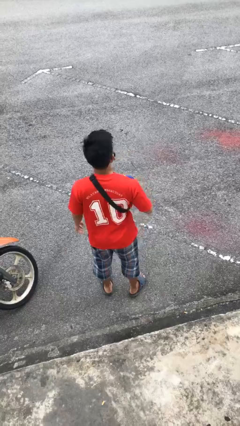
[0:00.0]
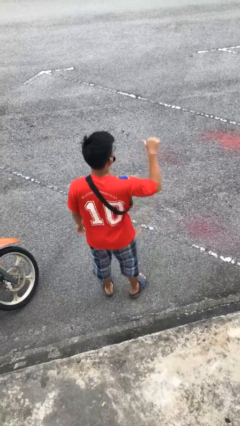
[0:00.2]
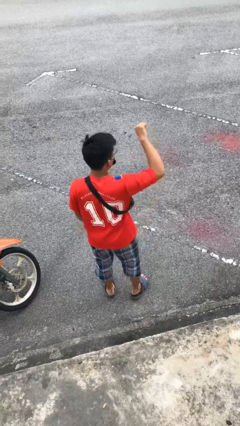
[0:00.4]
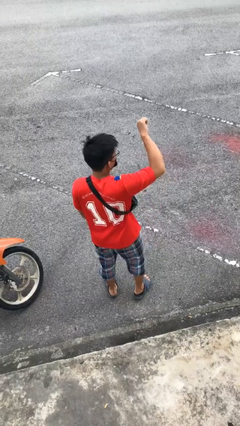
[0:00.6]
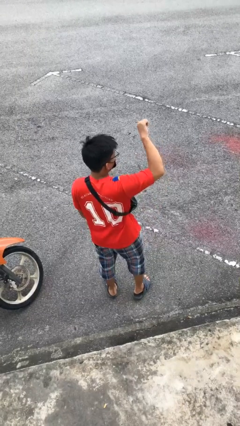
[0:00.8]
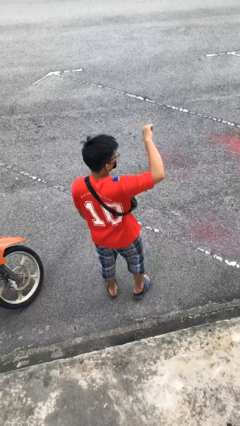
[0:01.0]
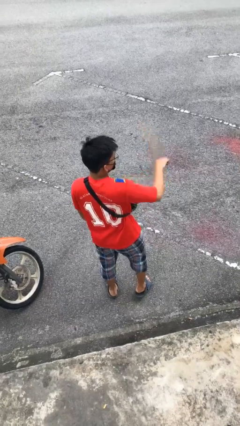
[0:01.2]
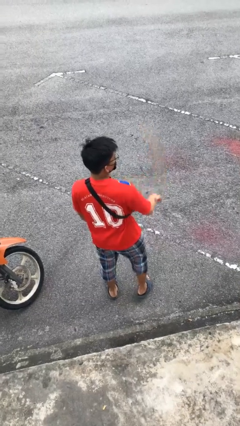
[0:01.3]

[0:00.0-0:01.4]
person gestures thumbs down

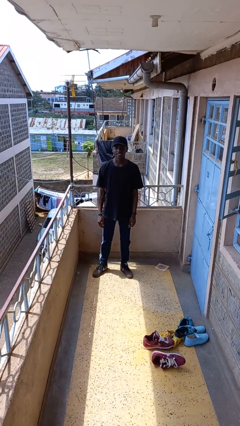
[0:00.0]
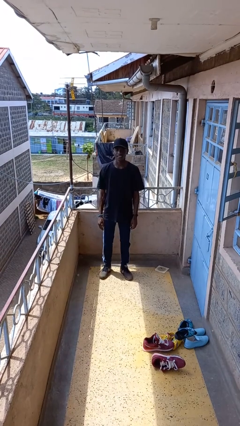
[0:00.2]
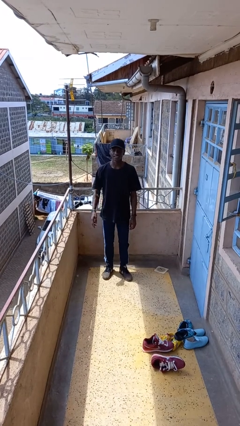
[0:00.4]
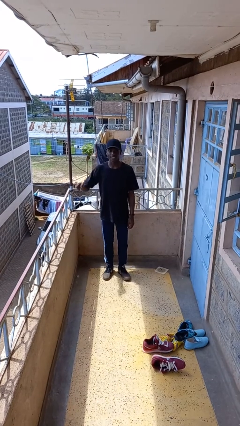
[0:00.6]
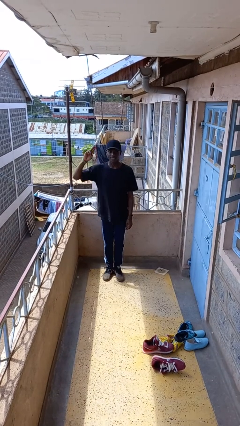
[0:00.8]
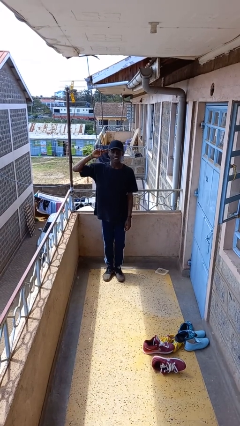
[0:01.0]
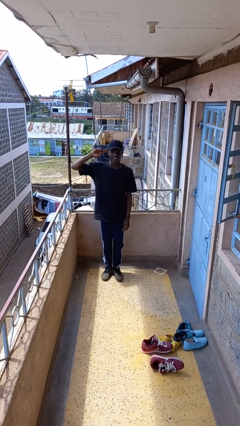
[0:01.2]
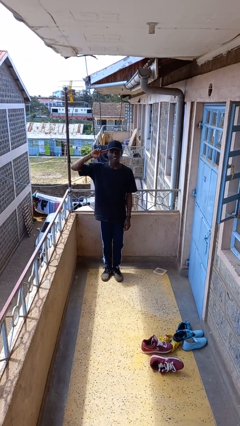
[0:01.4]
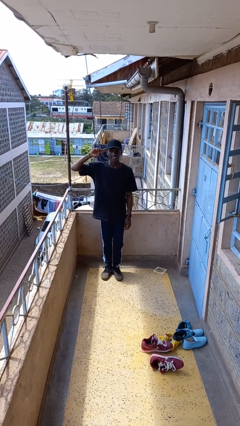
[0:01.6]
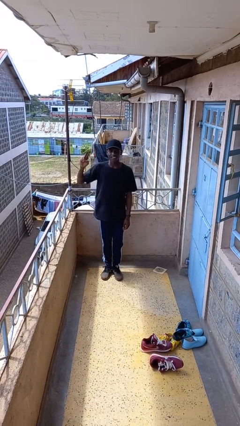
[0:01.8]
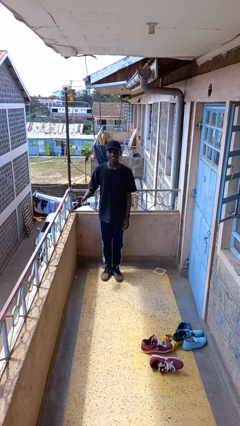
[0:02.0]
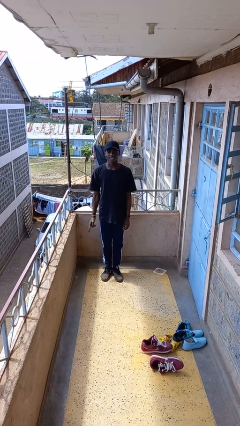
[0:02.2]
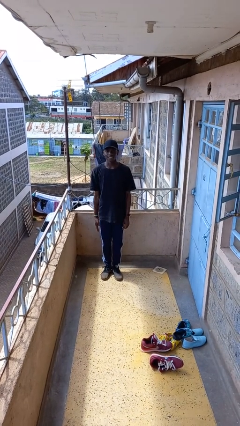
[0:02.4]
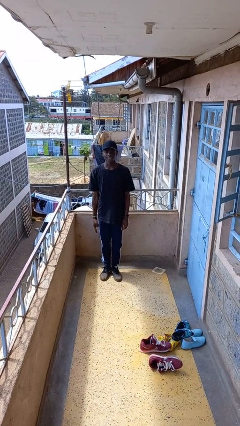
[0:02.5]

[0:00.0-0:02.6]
person salutes

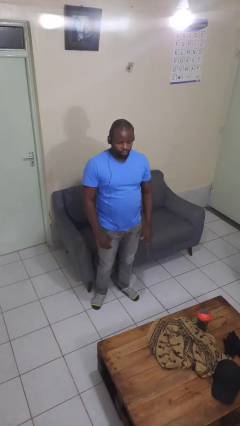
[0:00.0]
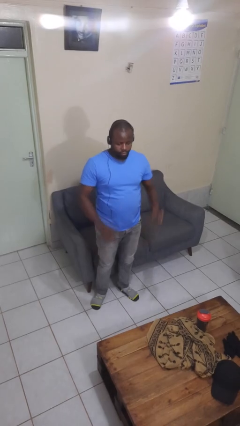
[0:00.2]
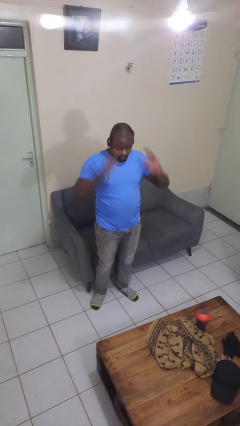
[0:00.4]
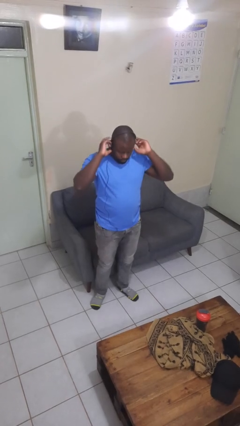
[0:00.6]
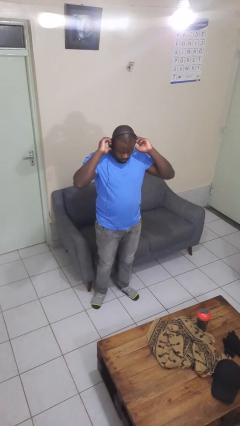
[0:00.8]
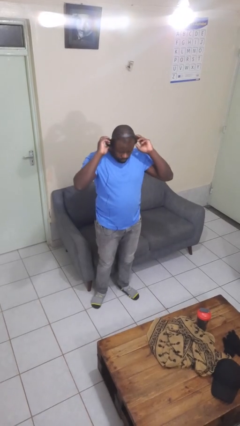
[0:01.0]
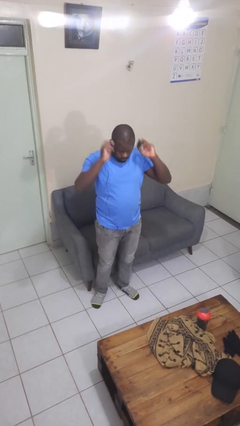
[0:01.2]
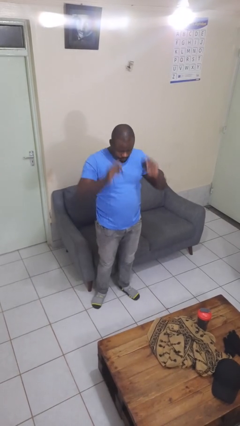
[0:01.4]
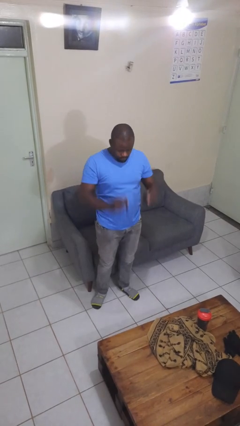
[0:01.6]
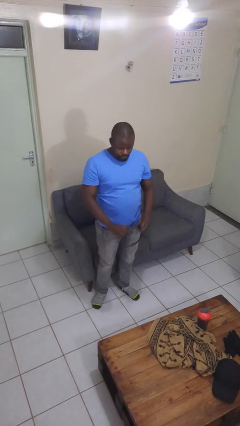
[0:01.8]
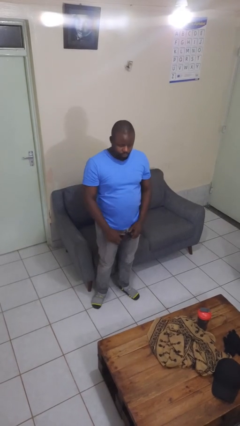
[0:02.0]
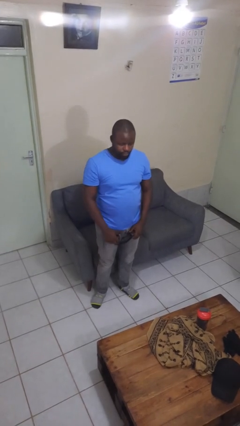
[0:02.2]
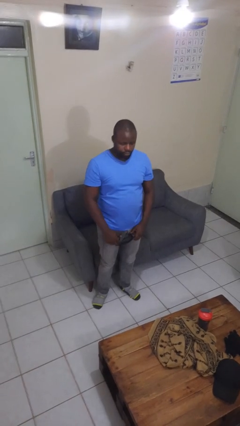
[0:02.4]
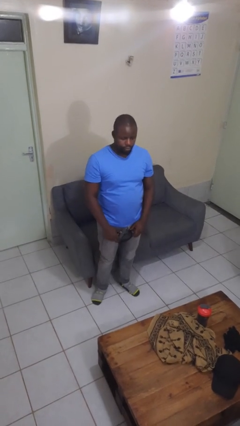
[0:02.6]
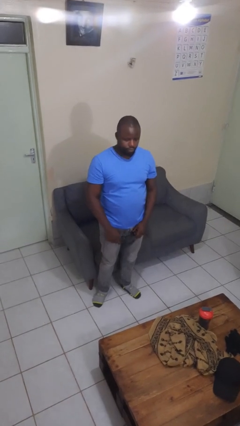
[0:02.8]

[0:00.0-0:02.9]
person takes off headphones

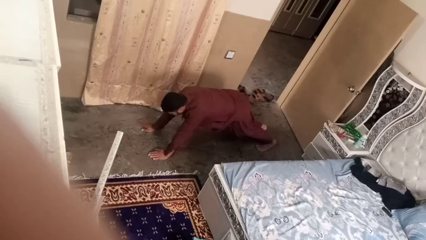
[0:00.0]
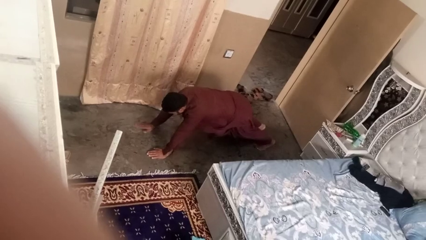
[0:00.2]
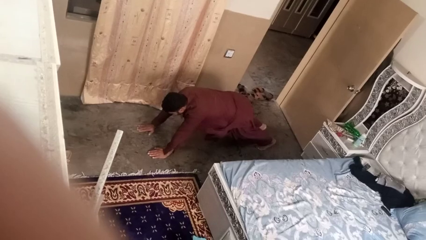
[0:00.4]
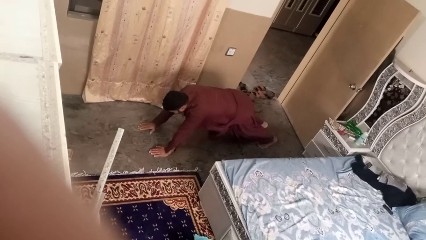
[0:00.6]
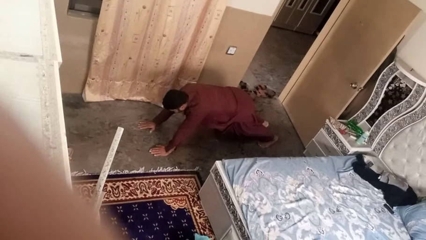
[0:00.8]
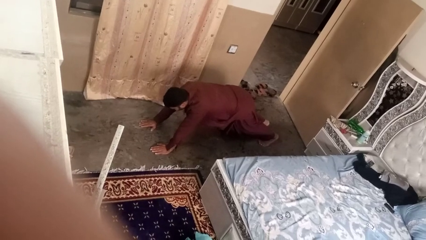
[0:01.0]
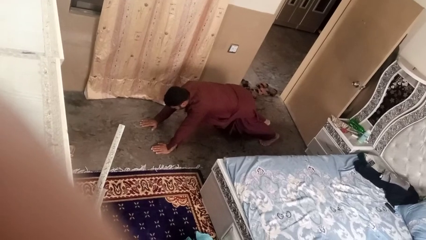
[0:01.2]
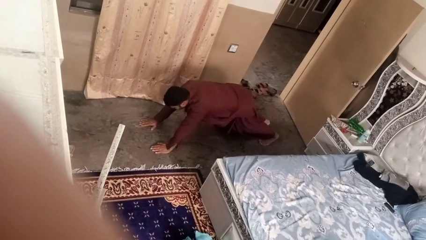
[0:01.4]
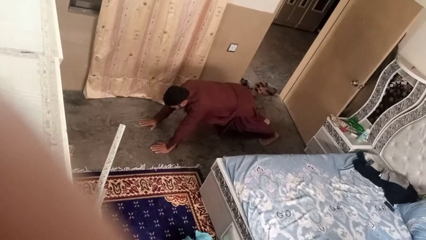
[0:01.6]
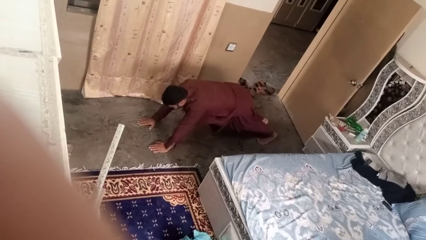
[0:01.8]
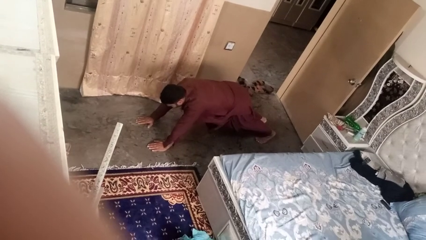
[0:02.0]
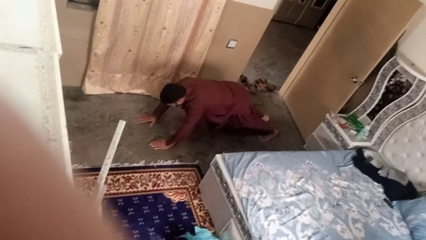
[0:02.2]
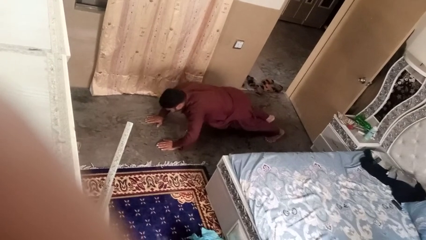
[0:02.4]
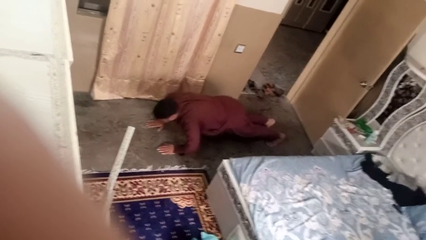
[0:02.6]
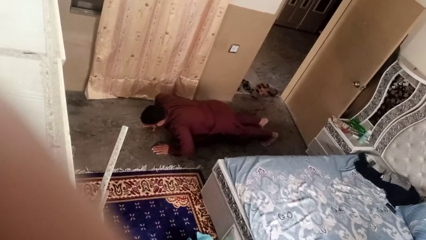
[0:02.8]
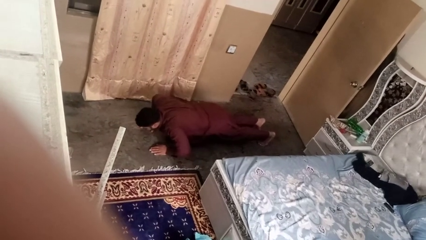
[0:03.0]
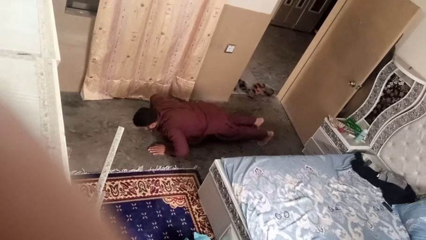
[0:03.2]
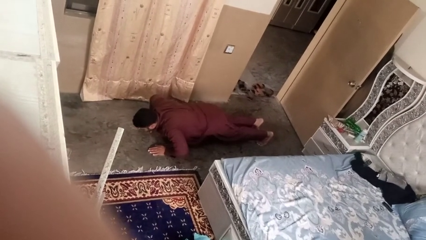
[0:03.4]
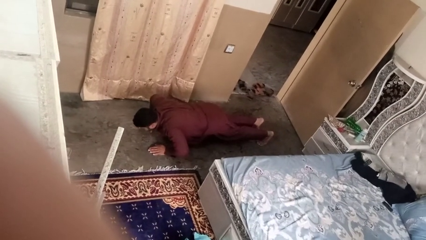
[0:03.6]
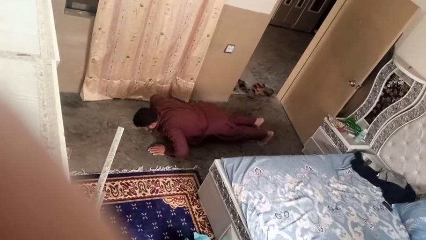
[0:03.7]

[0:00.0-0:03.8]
person exercises with pushup

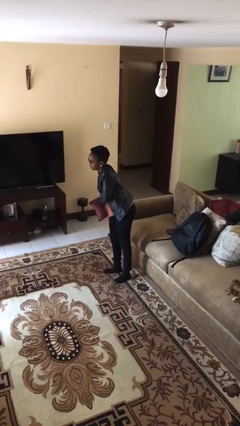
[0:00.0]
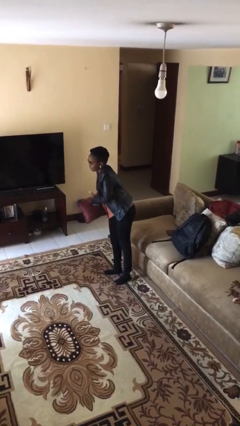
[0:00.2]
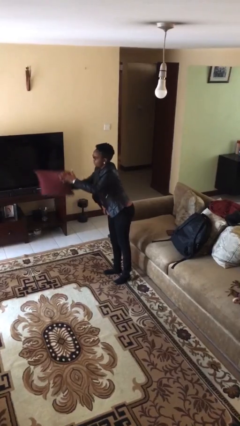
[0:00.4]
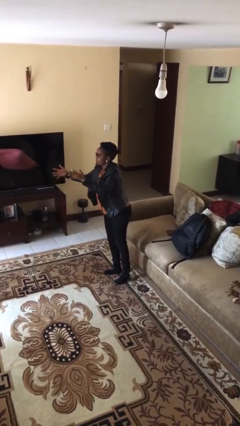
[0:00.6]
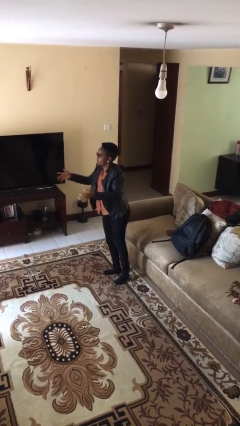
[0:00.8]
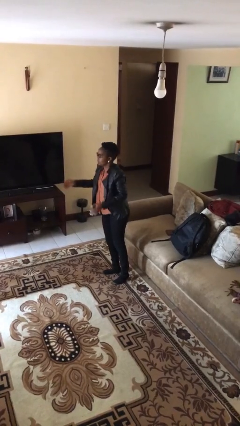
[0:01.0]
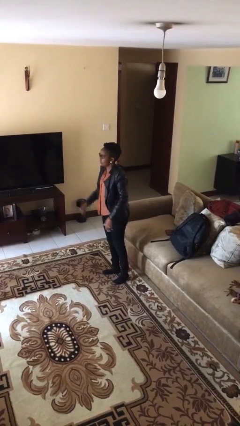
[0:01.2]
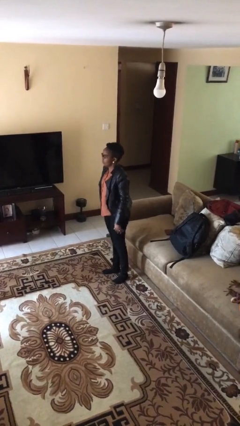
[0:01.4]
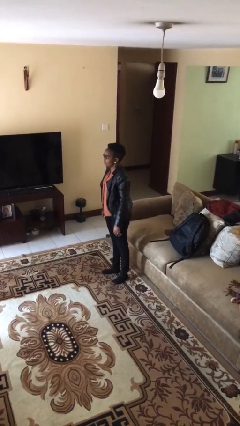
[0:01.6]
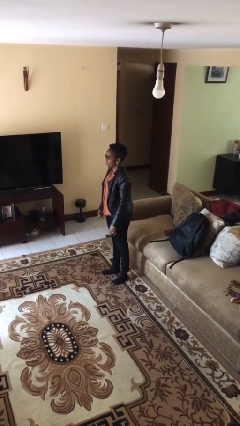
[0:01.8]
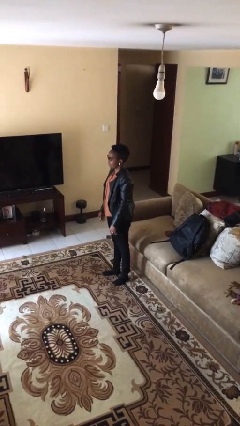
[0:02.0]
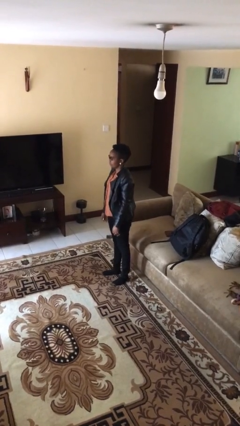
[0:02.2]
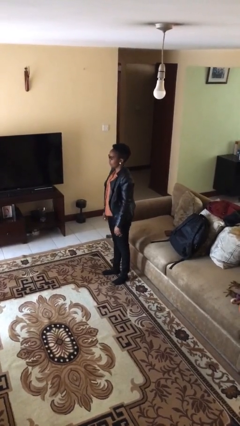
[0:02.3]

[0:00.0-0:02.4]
person throws object to person

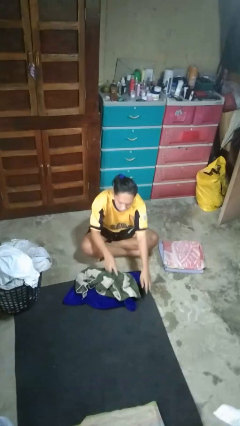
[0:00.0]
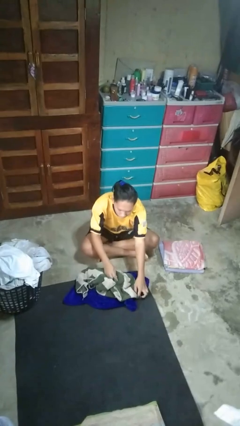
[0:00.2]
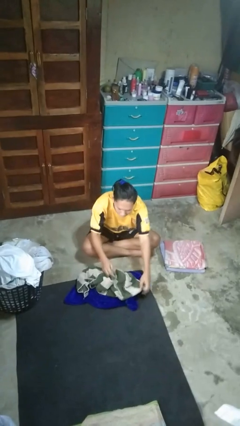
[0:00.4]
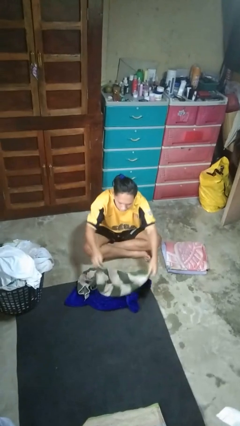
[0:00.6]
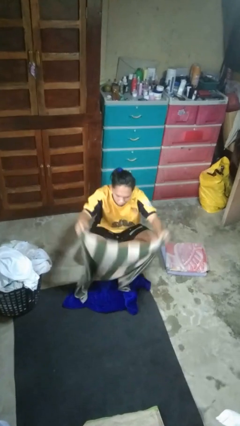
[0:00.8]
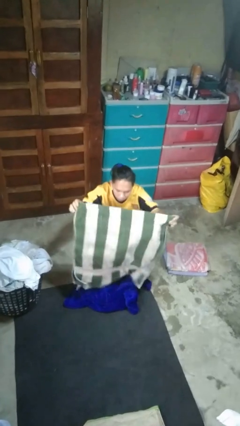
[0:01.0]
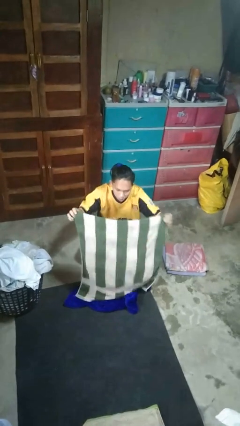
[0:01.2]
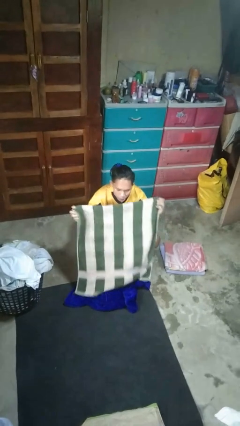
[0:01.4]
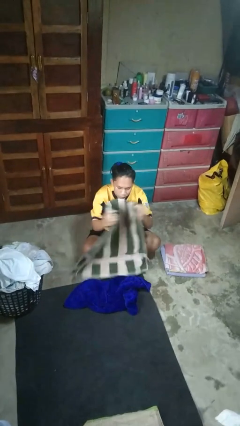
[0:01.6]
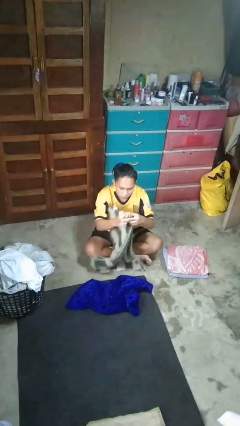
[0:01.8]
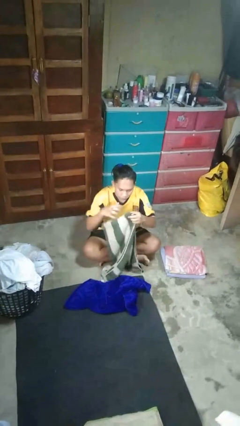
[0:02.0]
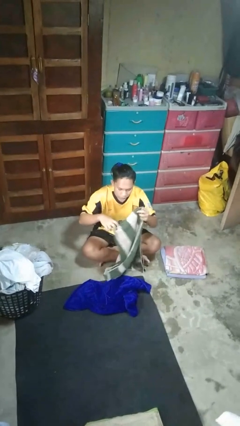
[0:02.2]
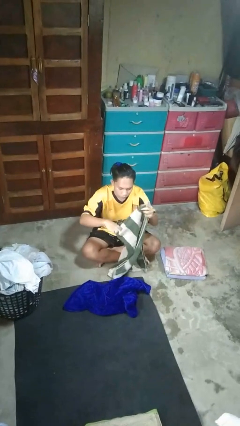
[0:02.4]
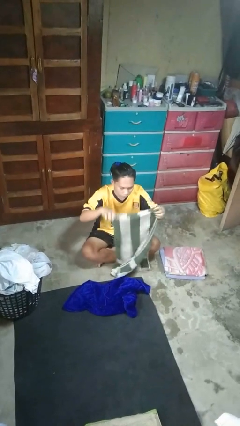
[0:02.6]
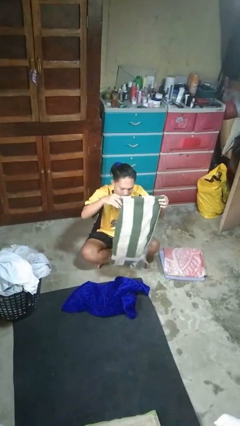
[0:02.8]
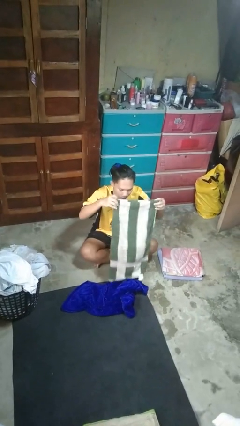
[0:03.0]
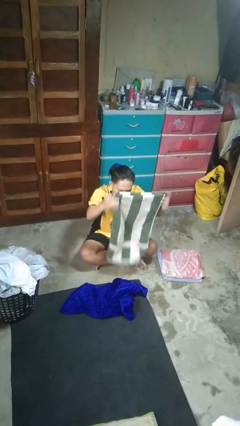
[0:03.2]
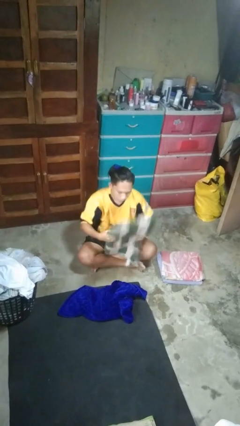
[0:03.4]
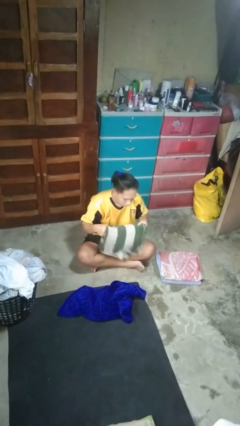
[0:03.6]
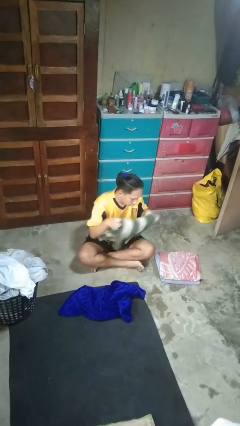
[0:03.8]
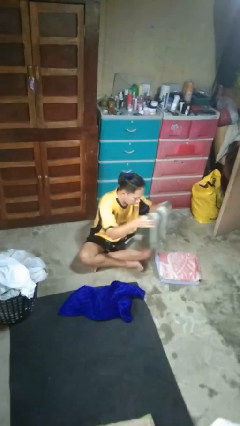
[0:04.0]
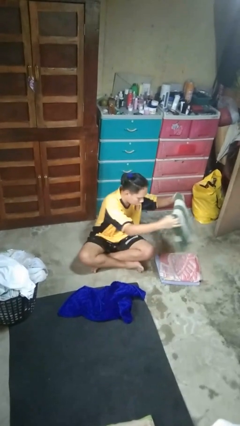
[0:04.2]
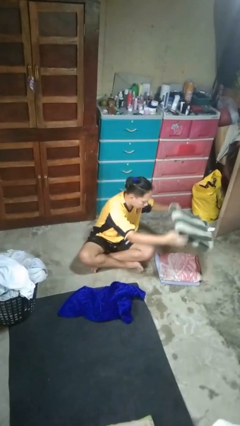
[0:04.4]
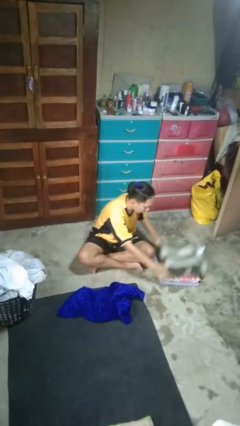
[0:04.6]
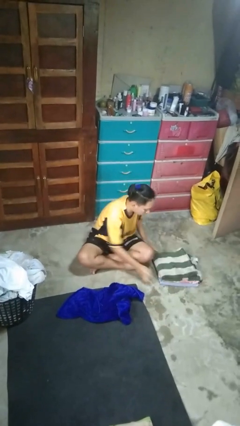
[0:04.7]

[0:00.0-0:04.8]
person folds towel
